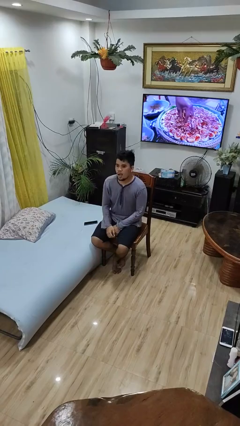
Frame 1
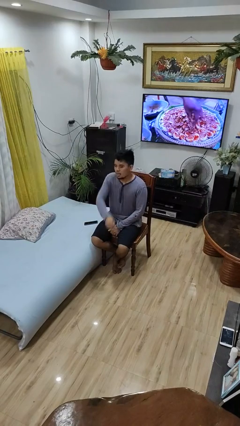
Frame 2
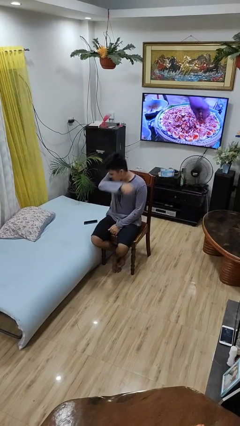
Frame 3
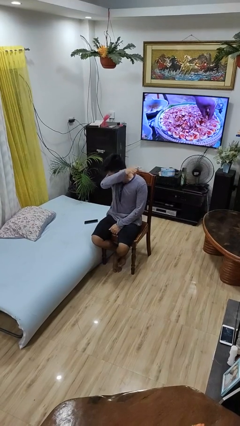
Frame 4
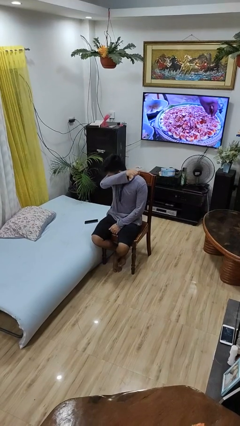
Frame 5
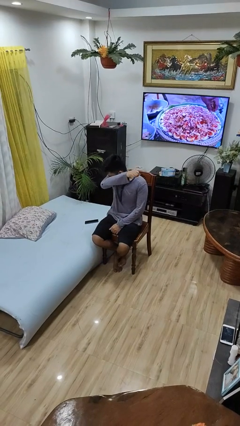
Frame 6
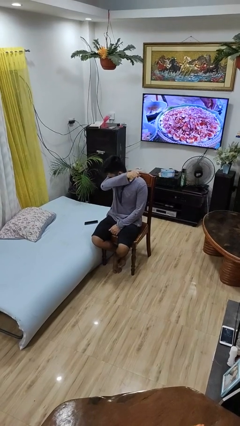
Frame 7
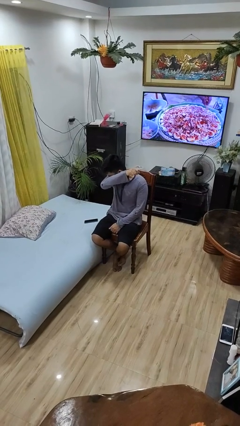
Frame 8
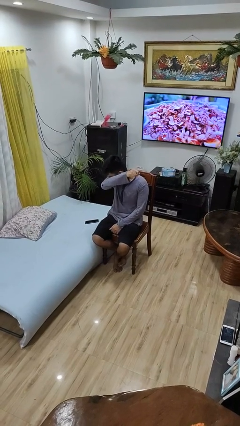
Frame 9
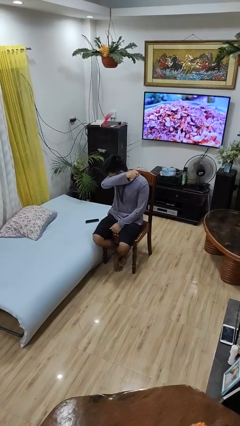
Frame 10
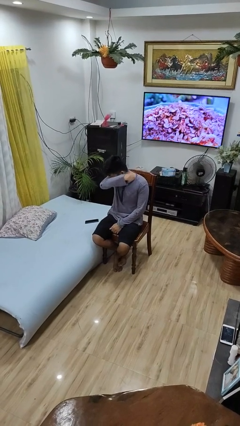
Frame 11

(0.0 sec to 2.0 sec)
person sneezes into arm

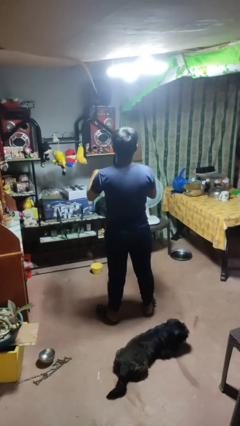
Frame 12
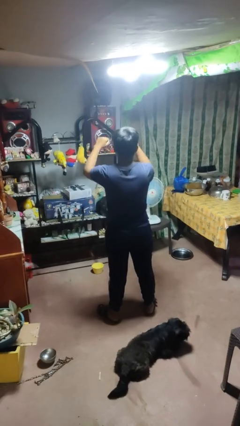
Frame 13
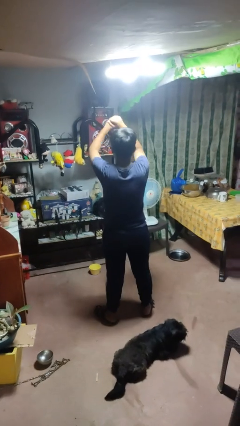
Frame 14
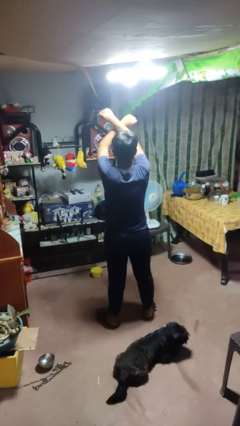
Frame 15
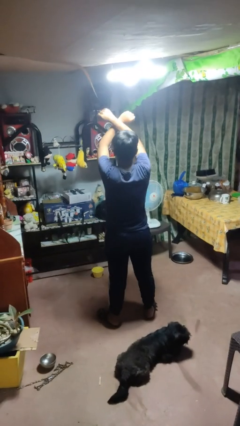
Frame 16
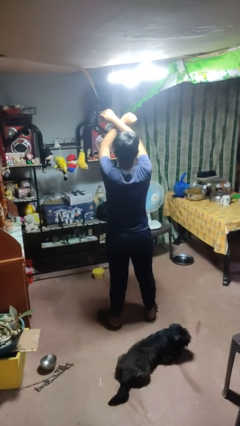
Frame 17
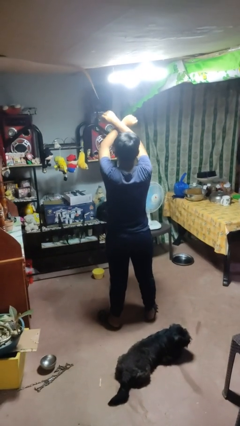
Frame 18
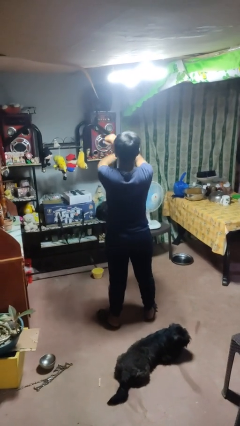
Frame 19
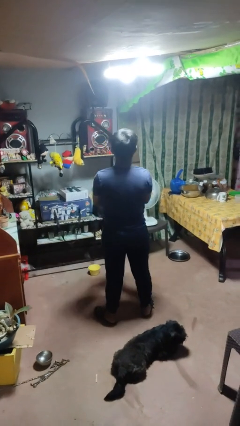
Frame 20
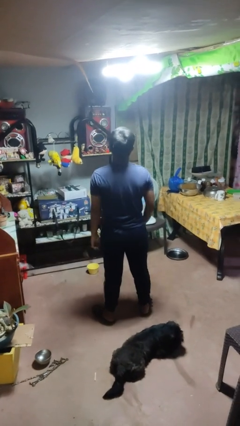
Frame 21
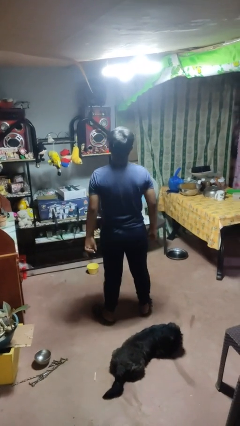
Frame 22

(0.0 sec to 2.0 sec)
person gestures arms x

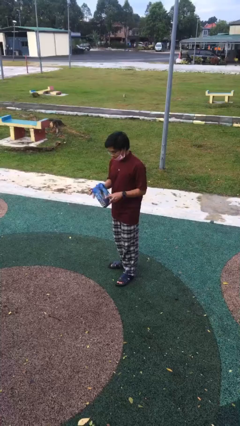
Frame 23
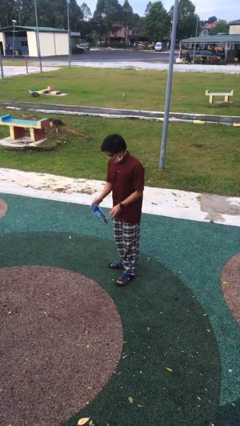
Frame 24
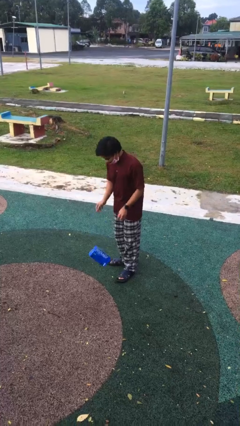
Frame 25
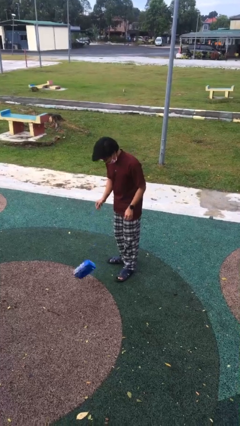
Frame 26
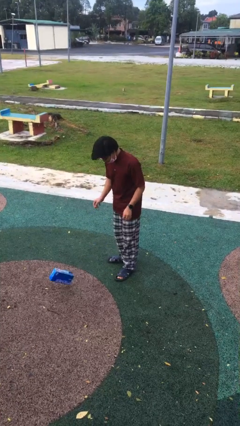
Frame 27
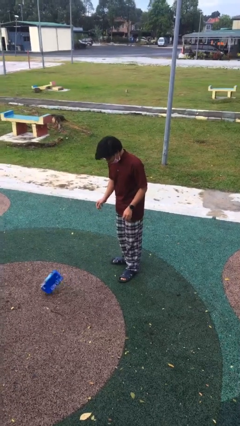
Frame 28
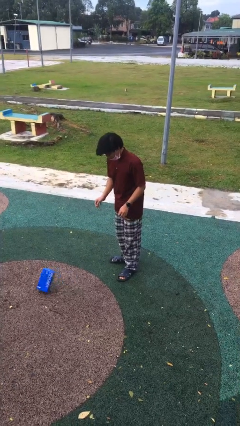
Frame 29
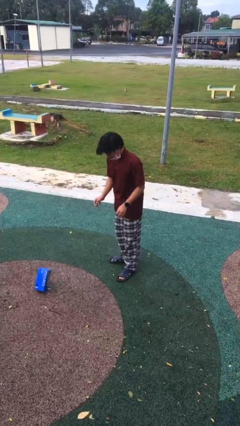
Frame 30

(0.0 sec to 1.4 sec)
person drops object

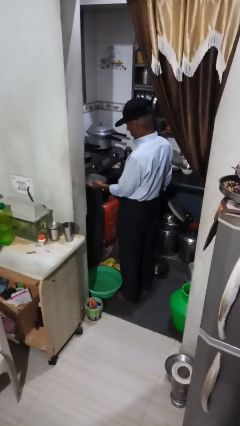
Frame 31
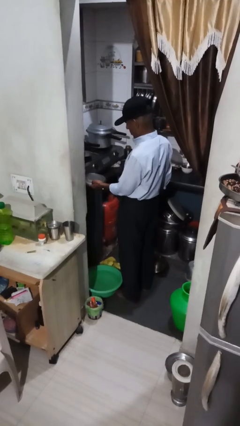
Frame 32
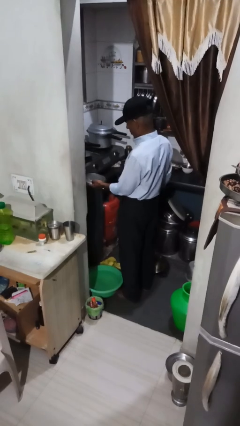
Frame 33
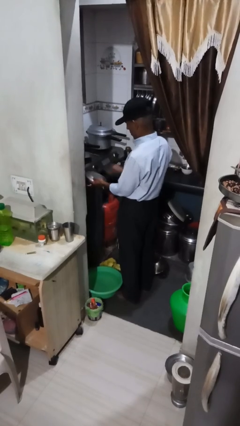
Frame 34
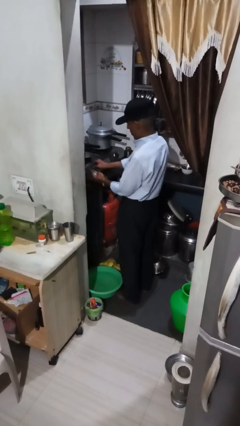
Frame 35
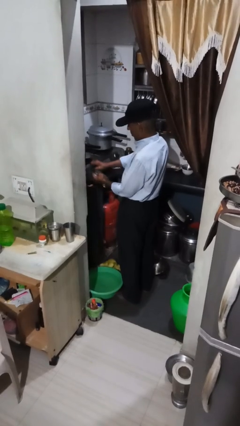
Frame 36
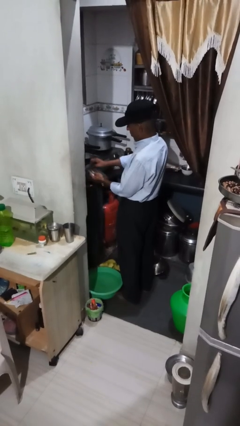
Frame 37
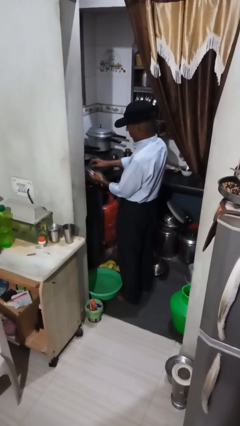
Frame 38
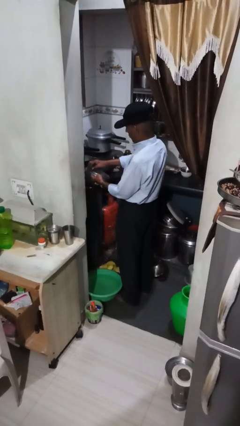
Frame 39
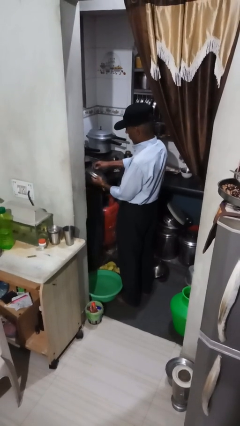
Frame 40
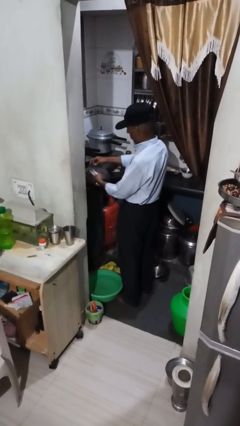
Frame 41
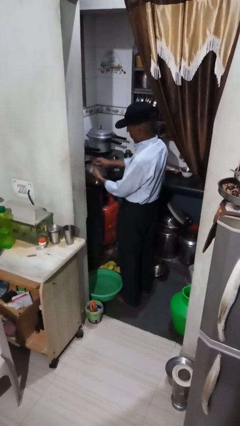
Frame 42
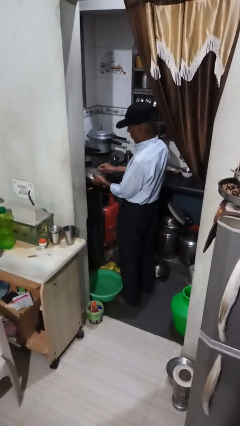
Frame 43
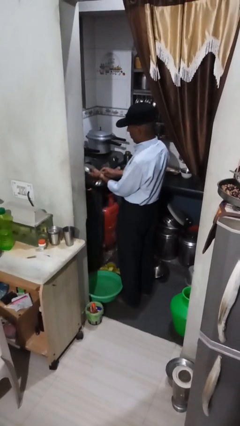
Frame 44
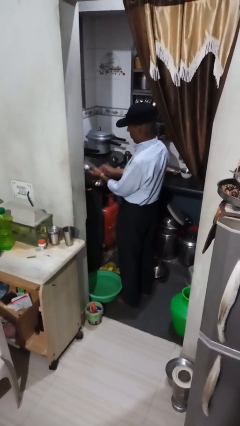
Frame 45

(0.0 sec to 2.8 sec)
person washes dish

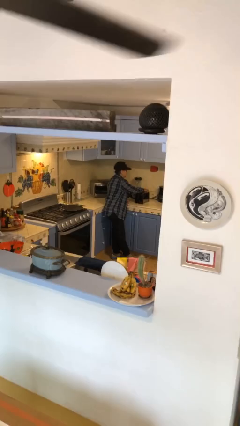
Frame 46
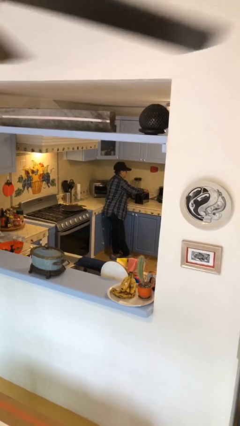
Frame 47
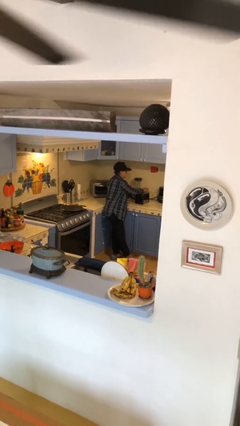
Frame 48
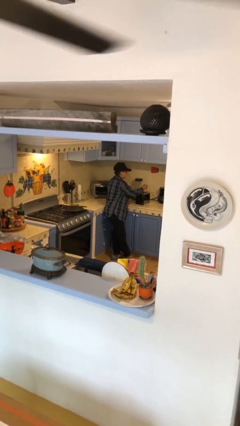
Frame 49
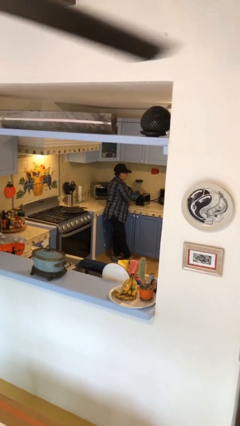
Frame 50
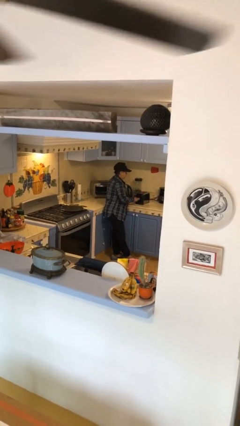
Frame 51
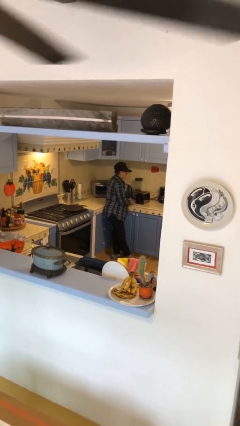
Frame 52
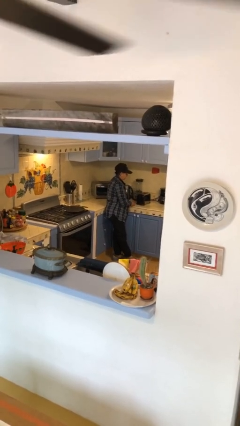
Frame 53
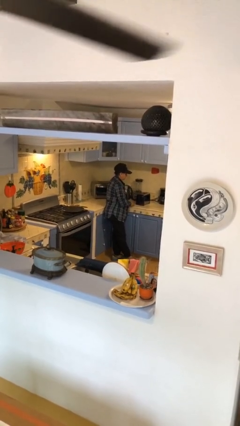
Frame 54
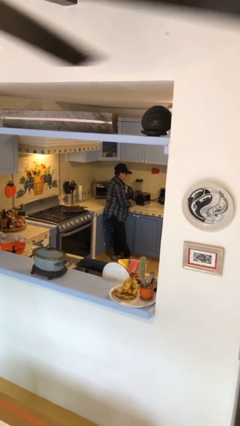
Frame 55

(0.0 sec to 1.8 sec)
person takes object from toaster

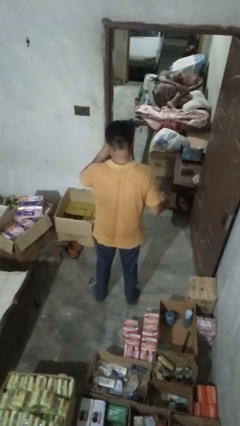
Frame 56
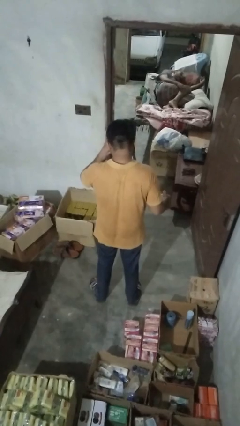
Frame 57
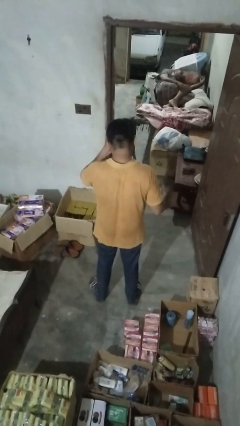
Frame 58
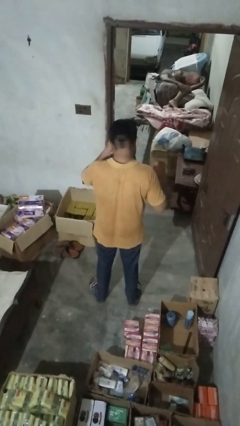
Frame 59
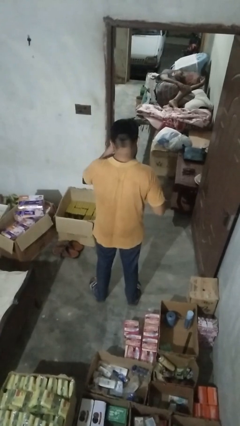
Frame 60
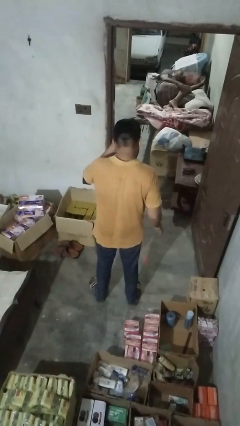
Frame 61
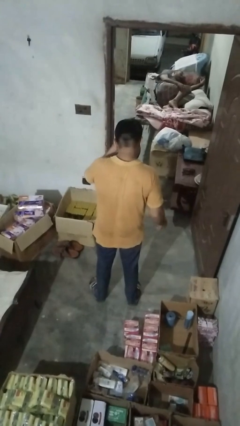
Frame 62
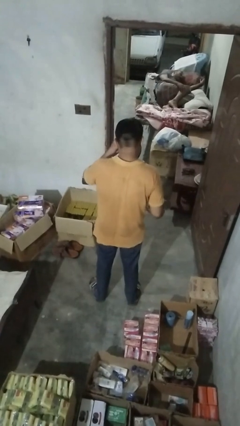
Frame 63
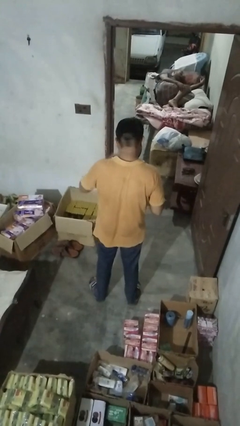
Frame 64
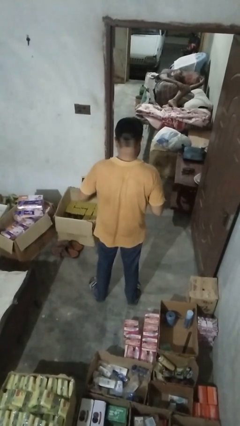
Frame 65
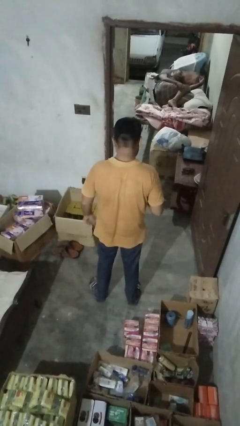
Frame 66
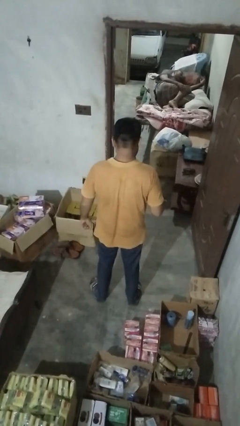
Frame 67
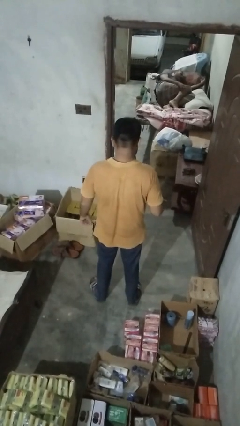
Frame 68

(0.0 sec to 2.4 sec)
person bounces ball on floor

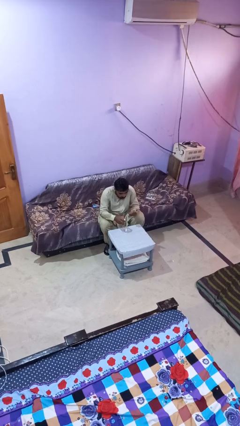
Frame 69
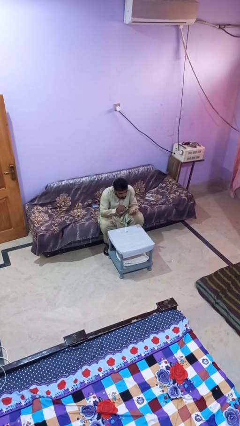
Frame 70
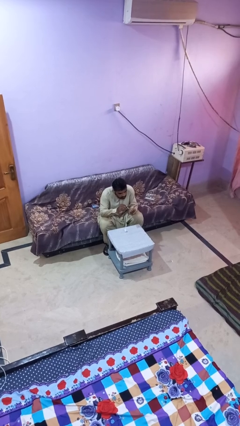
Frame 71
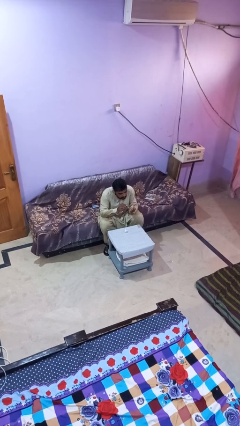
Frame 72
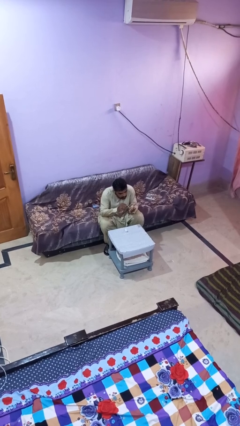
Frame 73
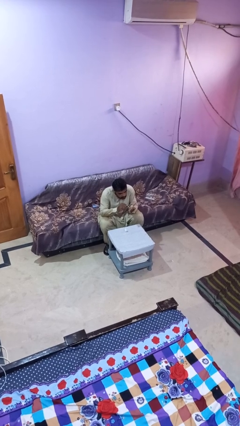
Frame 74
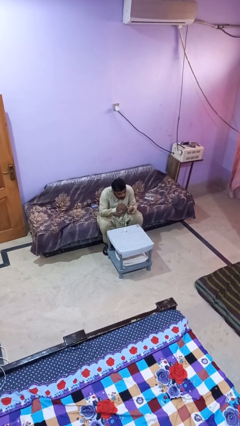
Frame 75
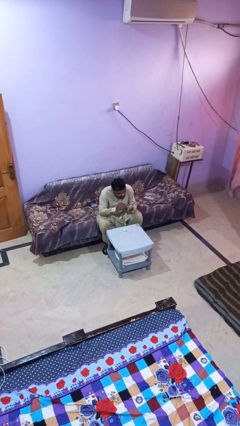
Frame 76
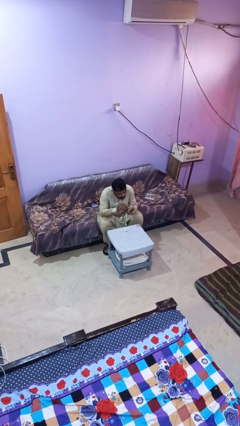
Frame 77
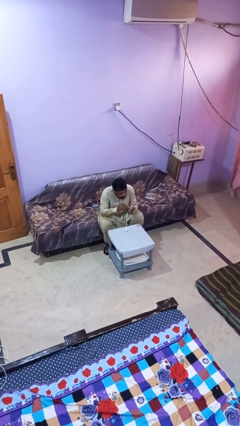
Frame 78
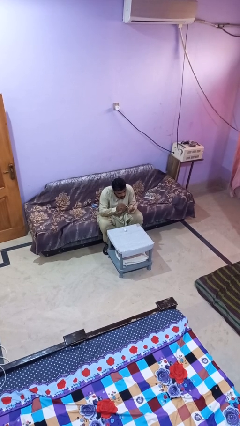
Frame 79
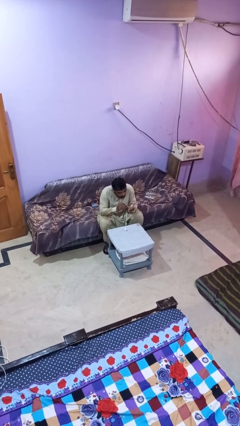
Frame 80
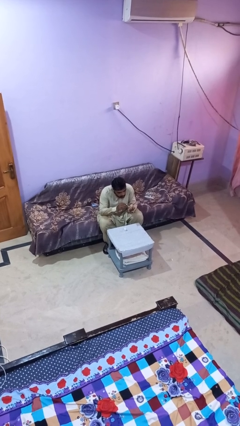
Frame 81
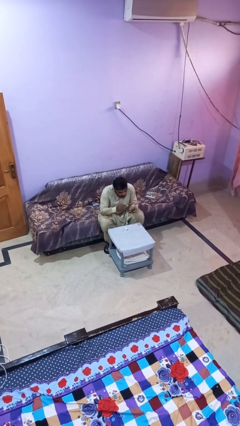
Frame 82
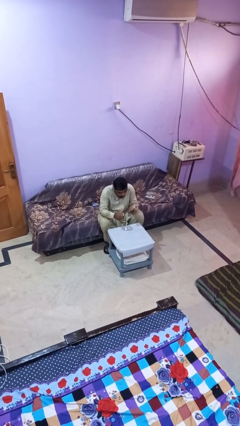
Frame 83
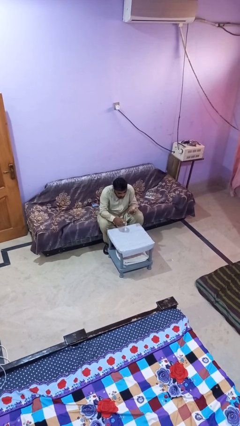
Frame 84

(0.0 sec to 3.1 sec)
person paints fingernails

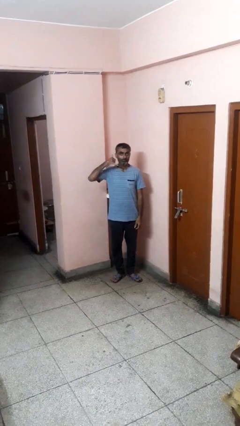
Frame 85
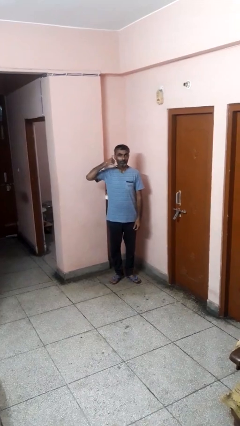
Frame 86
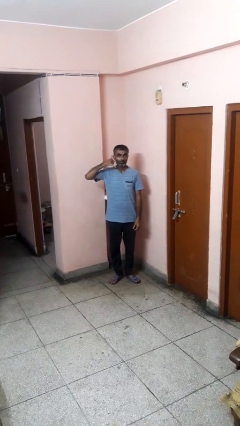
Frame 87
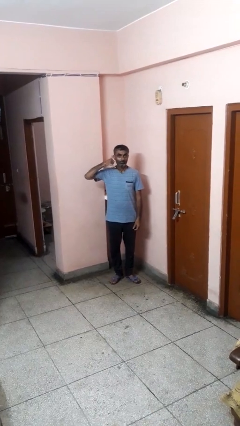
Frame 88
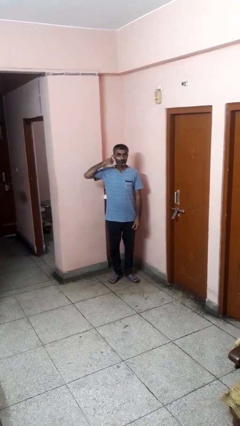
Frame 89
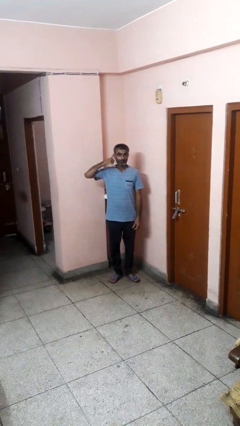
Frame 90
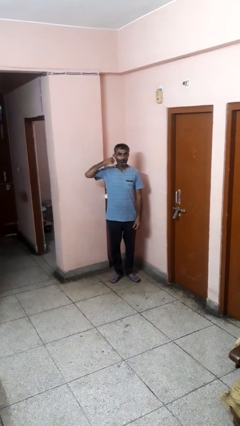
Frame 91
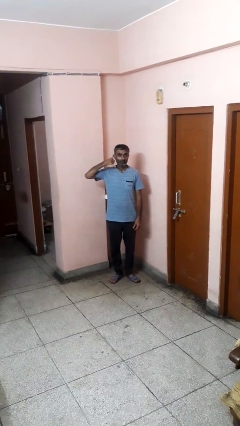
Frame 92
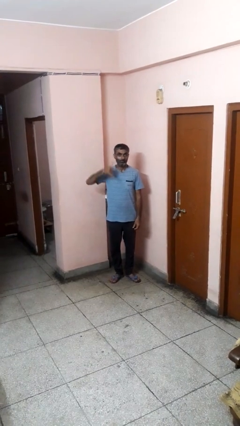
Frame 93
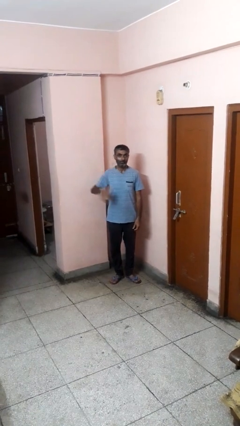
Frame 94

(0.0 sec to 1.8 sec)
person gestures call me
